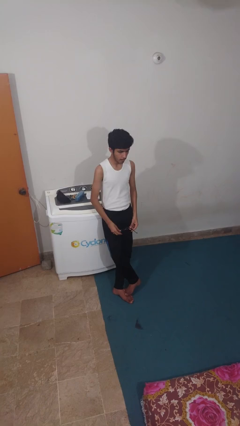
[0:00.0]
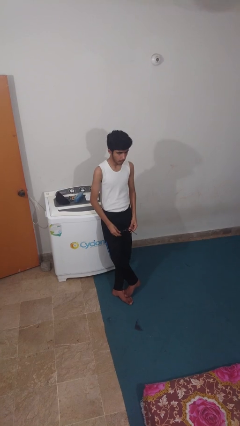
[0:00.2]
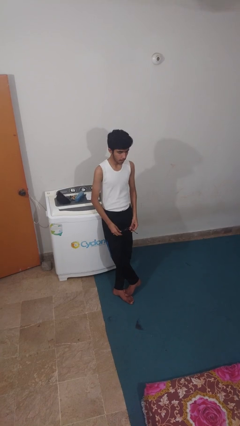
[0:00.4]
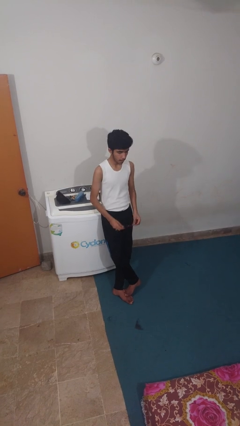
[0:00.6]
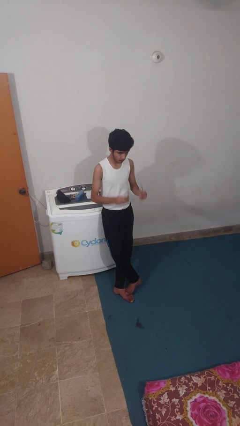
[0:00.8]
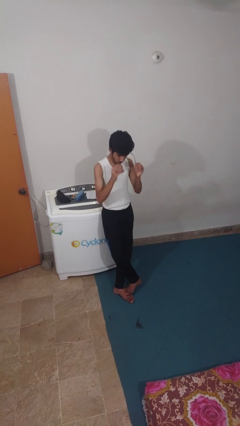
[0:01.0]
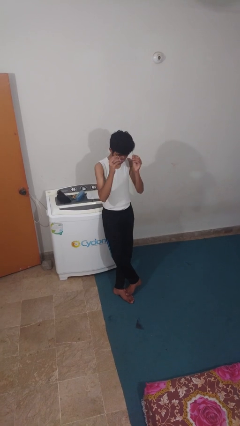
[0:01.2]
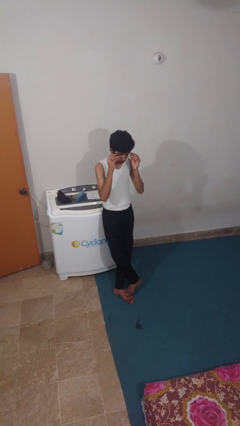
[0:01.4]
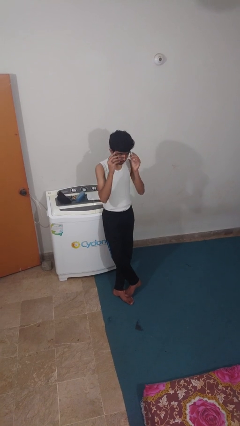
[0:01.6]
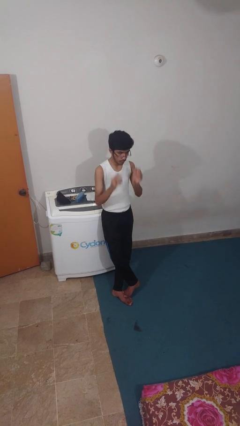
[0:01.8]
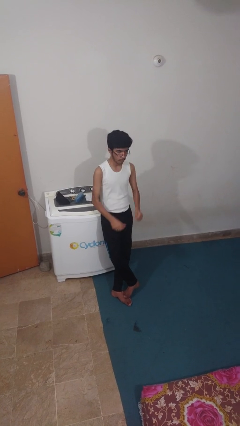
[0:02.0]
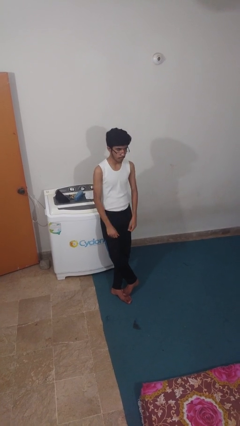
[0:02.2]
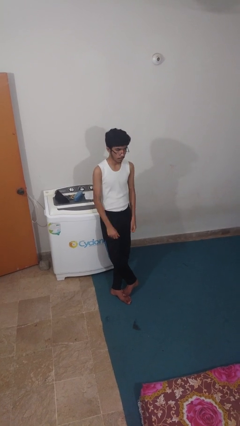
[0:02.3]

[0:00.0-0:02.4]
person puts on glasses

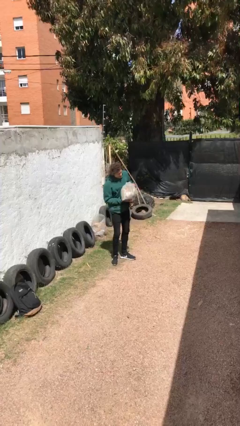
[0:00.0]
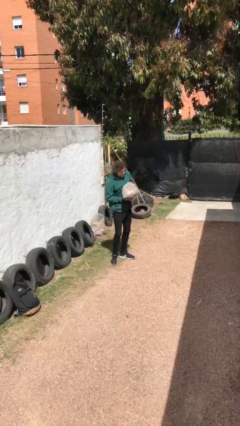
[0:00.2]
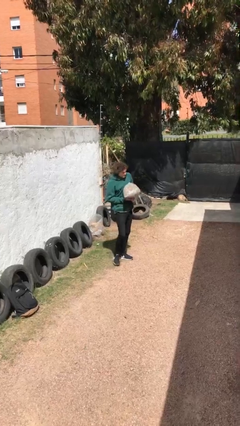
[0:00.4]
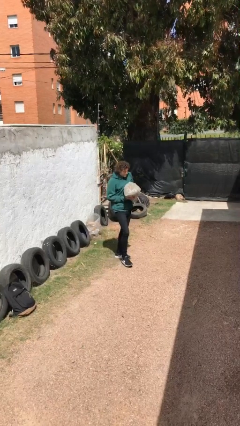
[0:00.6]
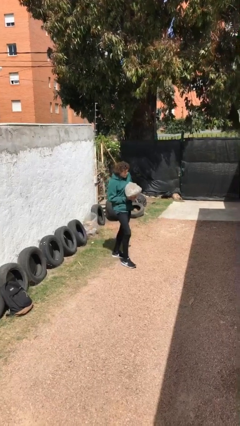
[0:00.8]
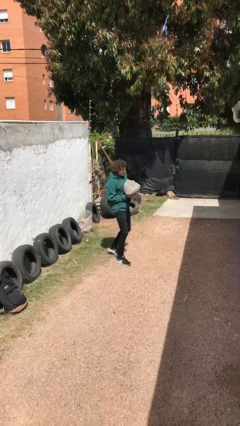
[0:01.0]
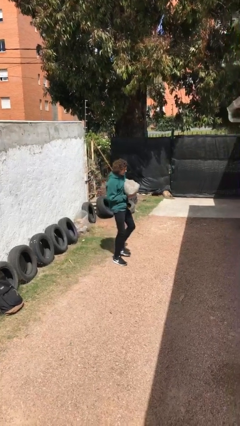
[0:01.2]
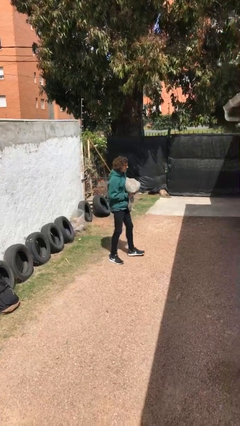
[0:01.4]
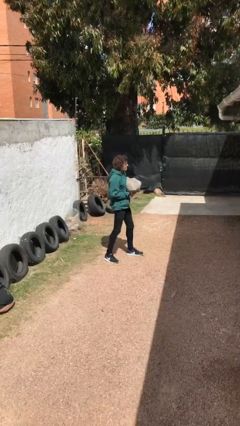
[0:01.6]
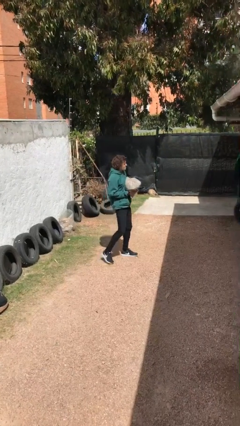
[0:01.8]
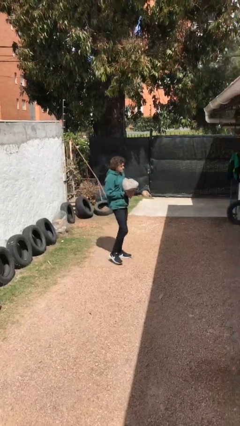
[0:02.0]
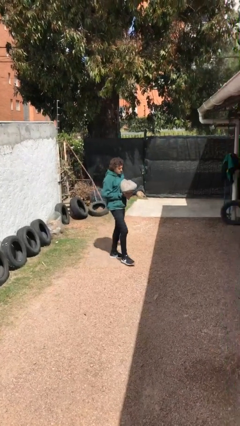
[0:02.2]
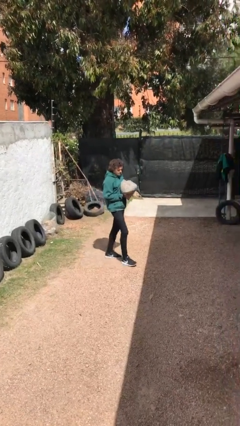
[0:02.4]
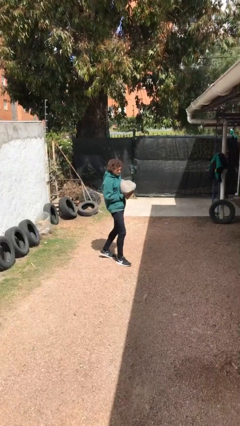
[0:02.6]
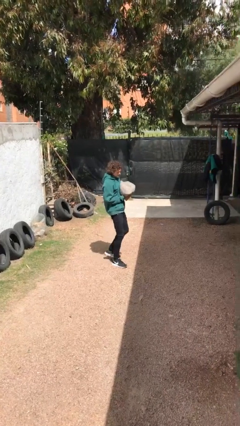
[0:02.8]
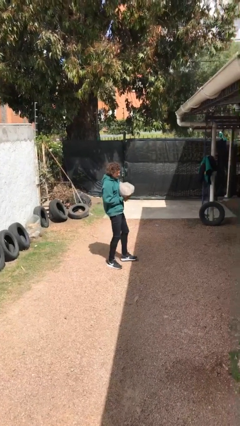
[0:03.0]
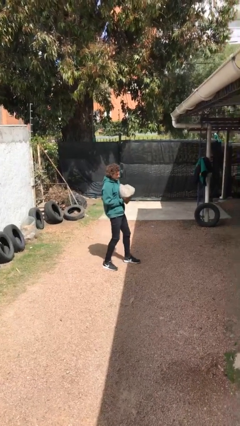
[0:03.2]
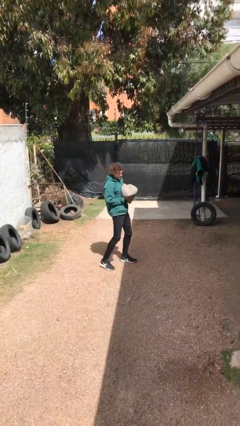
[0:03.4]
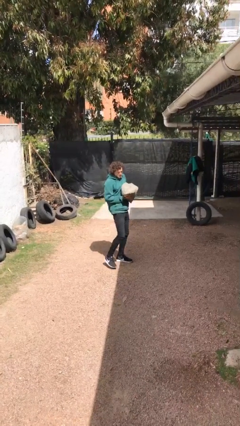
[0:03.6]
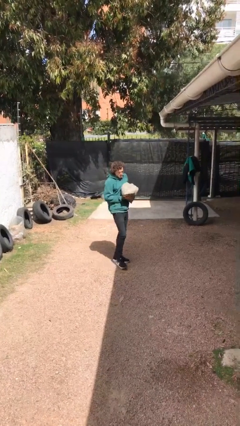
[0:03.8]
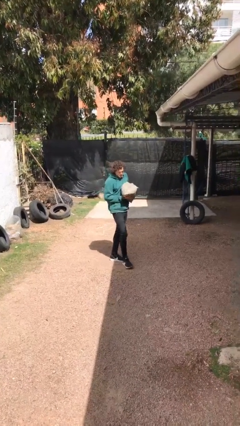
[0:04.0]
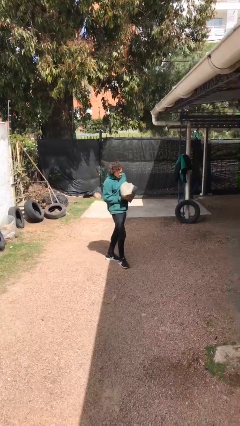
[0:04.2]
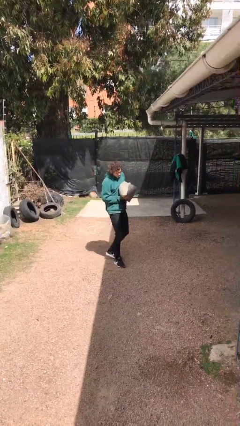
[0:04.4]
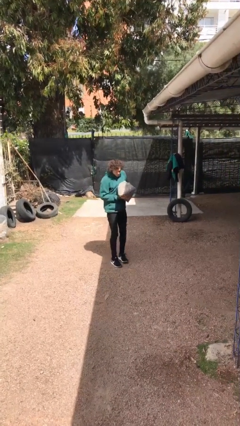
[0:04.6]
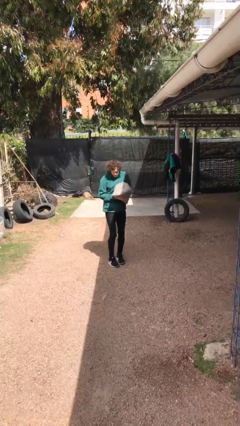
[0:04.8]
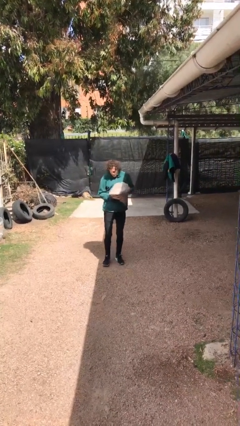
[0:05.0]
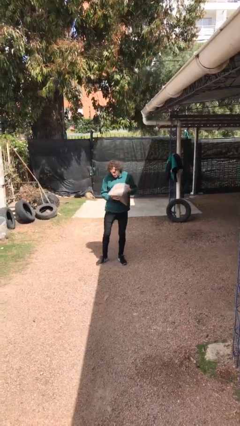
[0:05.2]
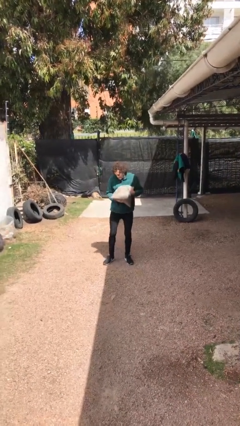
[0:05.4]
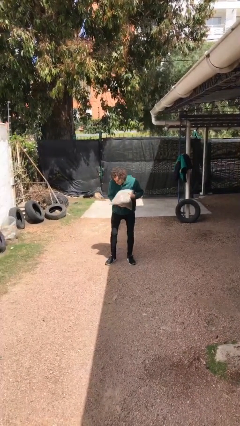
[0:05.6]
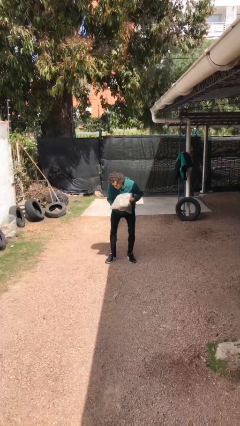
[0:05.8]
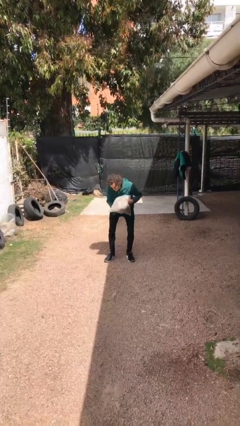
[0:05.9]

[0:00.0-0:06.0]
person carries heavy object

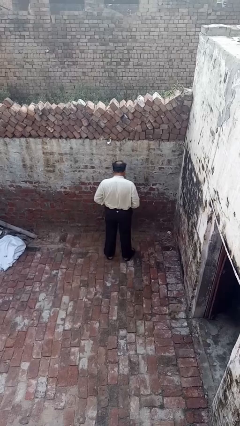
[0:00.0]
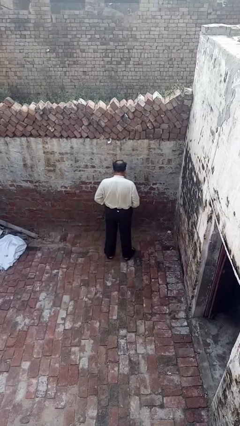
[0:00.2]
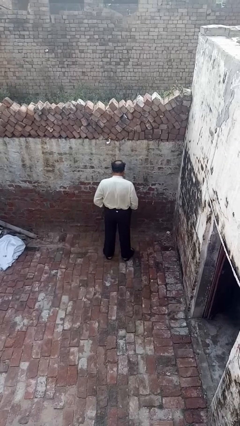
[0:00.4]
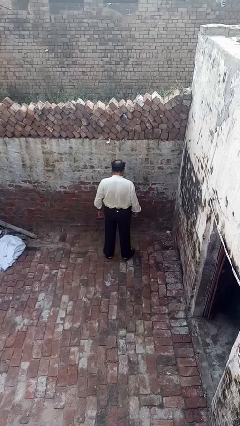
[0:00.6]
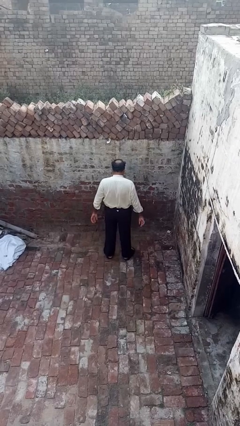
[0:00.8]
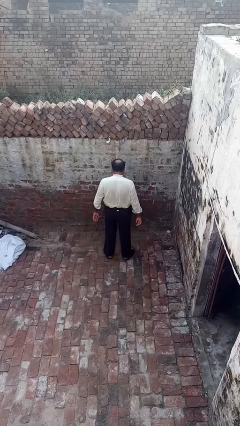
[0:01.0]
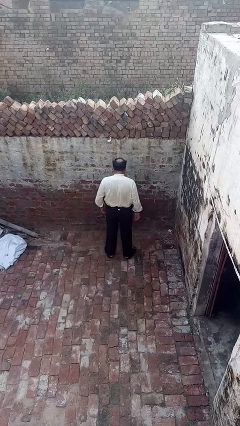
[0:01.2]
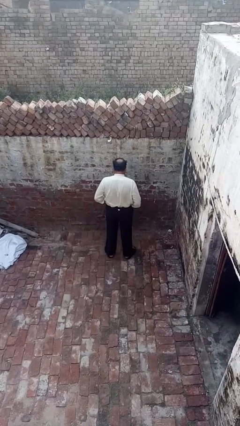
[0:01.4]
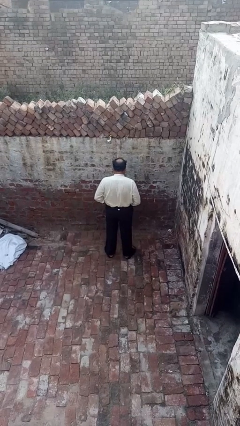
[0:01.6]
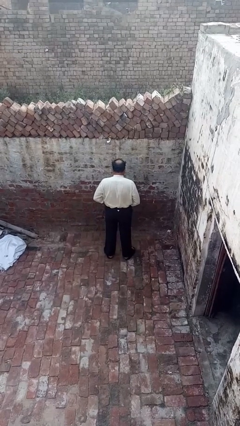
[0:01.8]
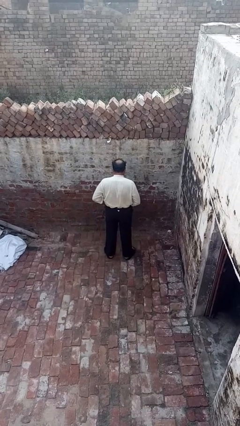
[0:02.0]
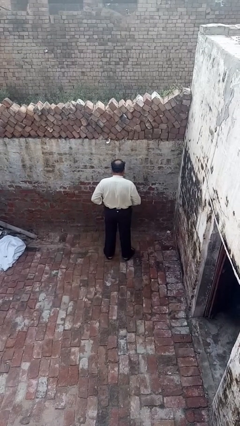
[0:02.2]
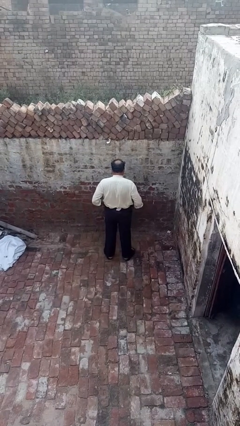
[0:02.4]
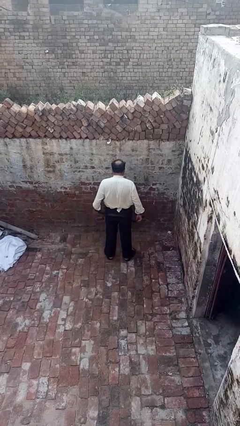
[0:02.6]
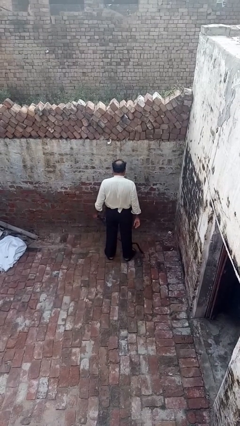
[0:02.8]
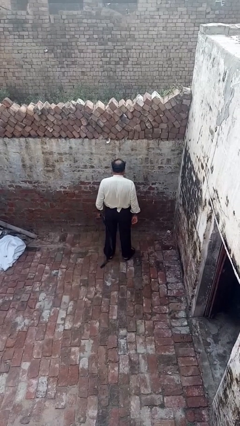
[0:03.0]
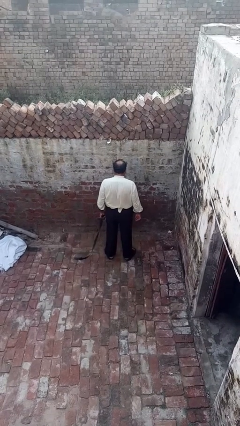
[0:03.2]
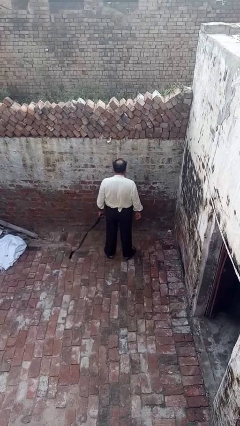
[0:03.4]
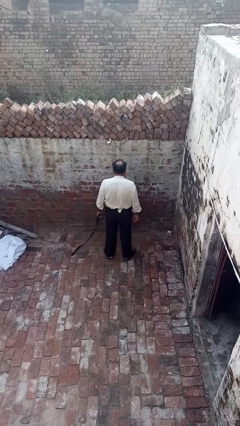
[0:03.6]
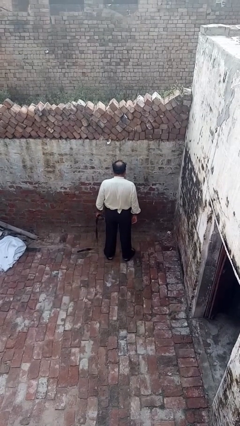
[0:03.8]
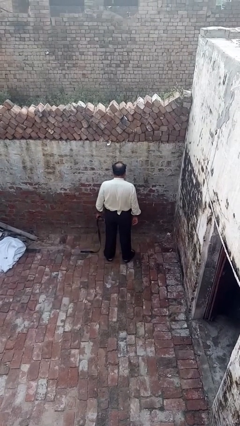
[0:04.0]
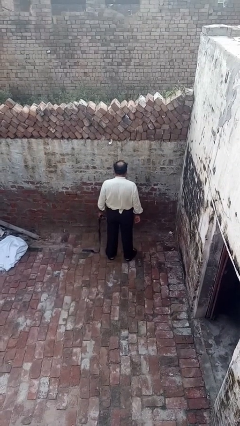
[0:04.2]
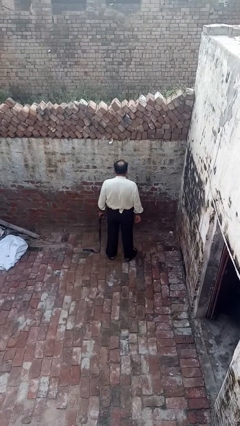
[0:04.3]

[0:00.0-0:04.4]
person takes off belt

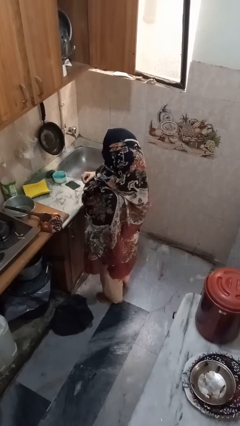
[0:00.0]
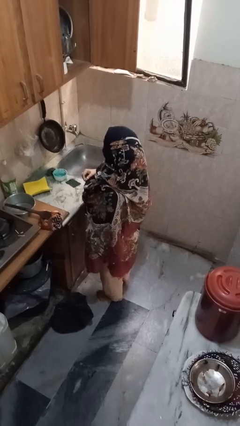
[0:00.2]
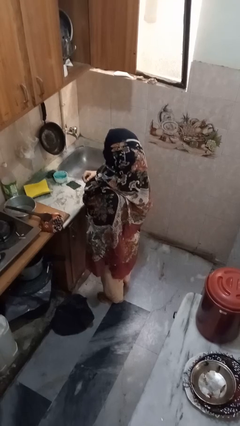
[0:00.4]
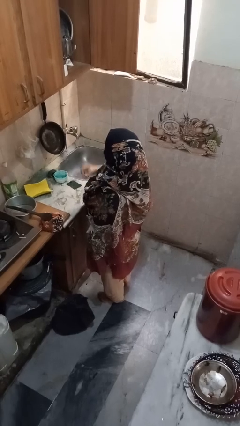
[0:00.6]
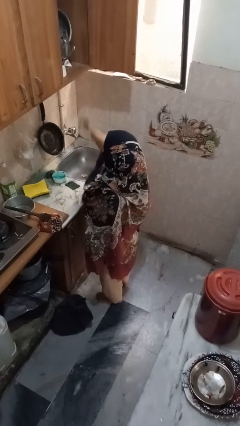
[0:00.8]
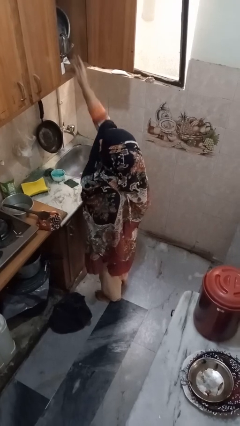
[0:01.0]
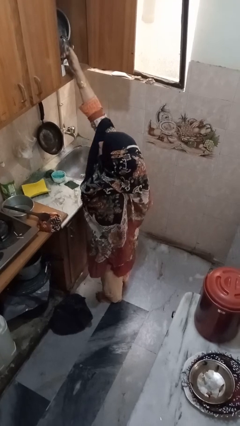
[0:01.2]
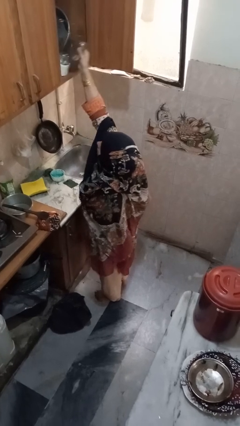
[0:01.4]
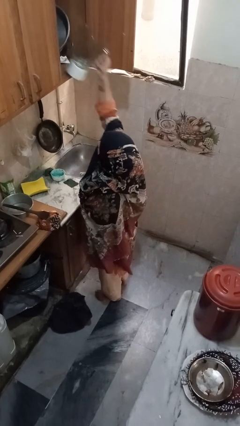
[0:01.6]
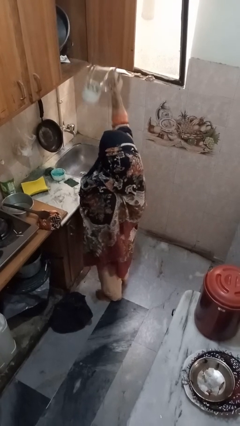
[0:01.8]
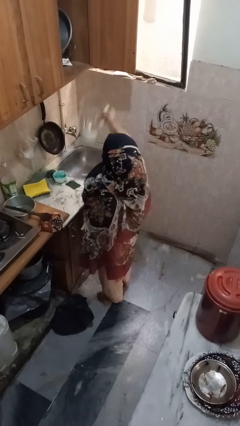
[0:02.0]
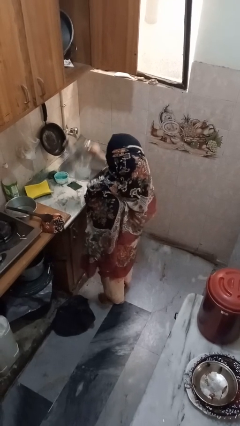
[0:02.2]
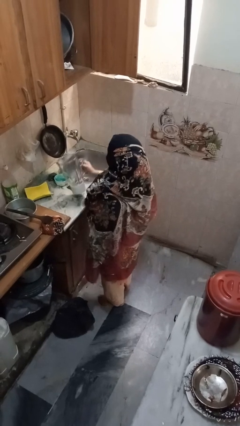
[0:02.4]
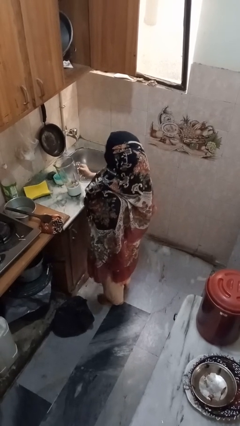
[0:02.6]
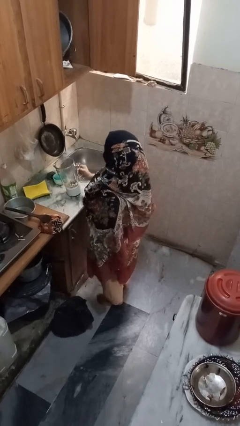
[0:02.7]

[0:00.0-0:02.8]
person puts object in cabinet

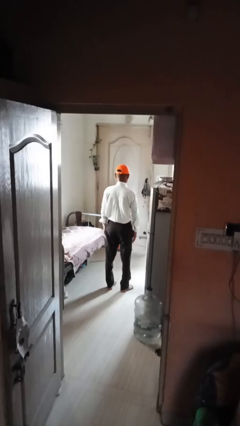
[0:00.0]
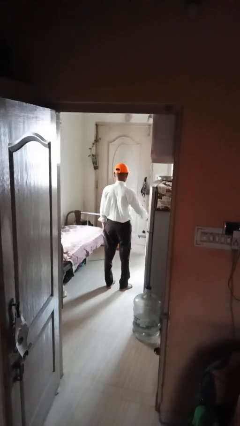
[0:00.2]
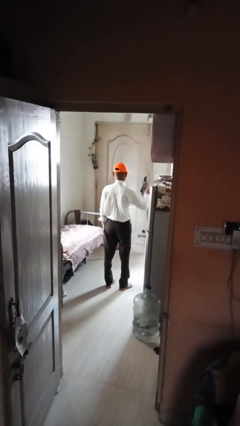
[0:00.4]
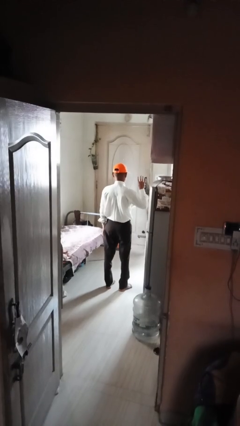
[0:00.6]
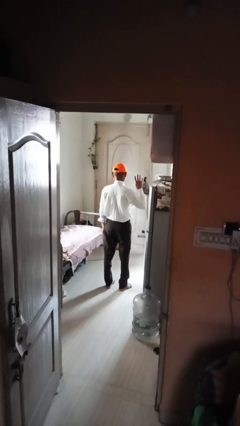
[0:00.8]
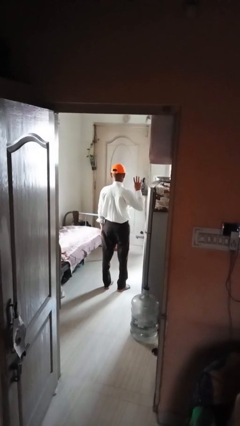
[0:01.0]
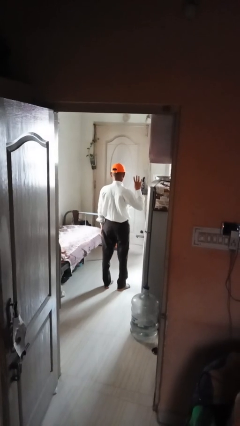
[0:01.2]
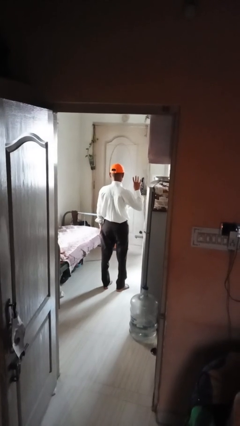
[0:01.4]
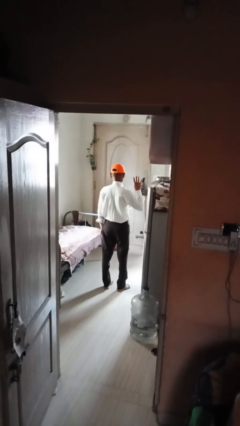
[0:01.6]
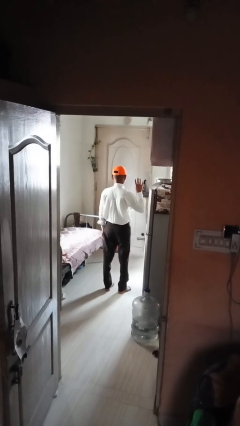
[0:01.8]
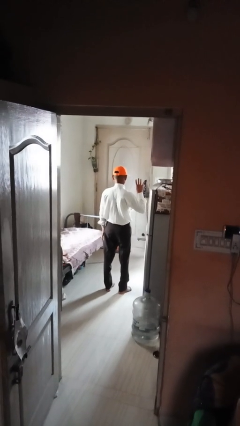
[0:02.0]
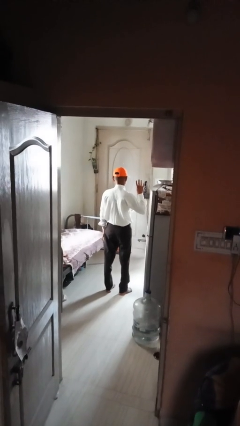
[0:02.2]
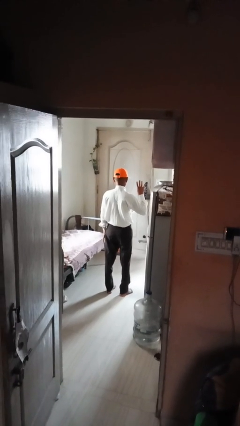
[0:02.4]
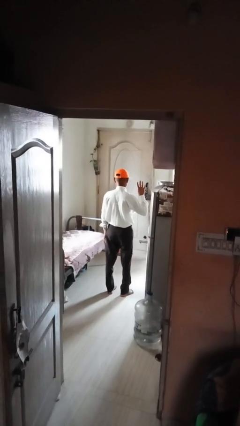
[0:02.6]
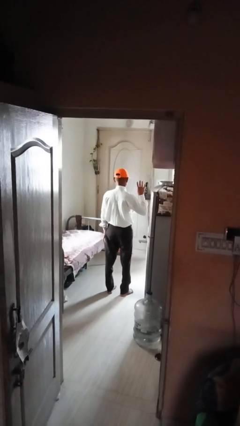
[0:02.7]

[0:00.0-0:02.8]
person gestures number four
